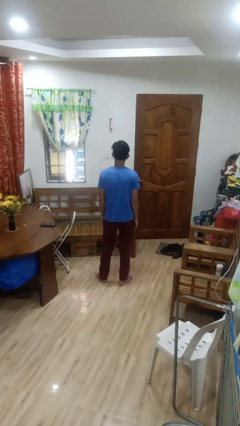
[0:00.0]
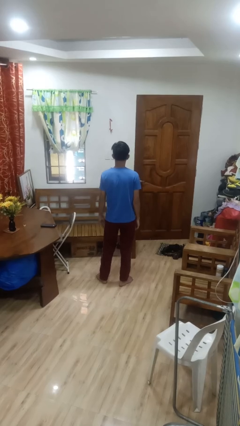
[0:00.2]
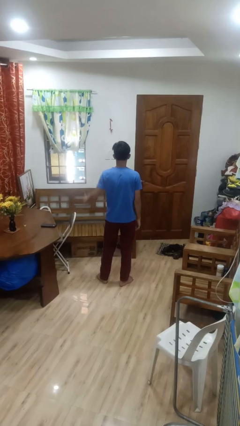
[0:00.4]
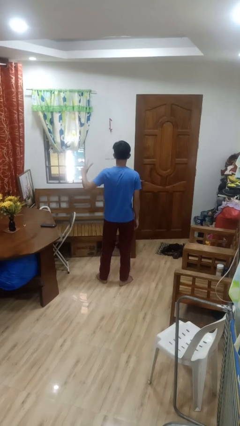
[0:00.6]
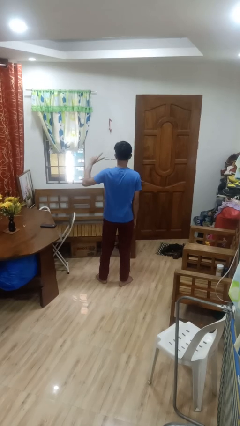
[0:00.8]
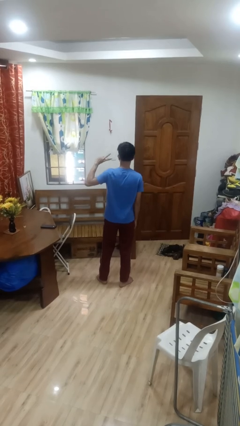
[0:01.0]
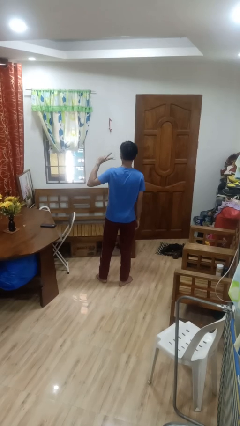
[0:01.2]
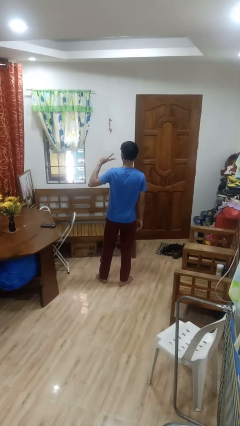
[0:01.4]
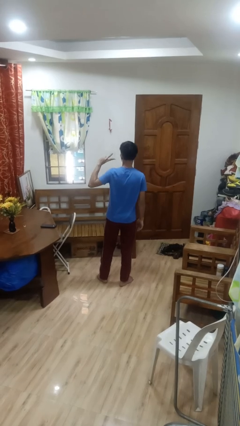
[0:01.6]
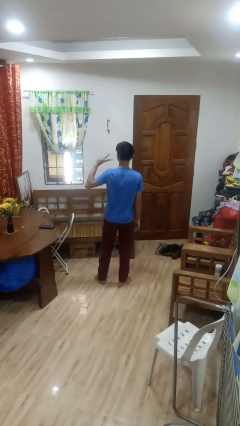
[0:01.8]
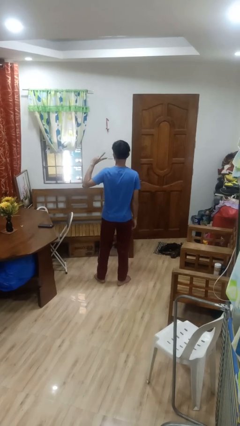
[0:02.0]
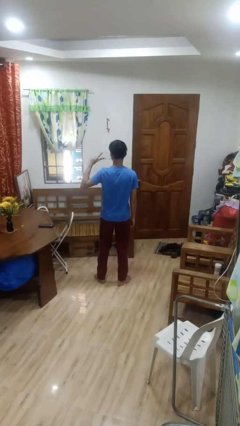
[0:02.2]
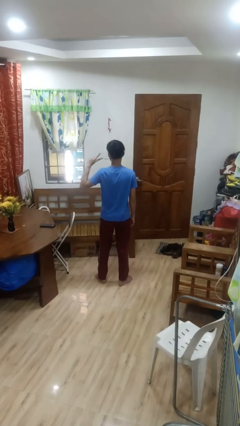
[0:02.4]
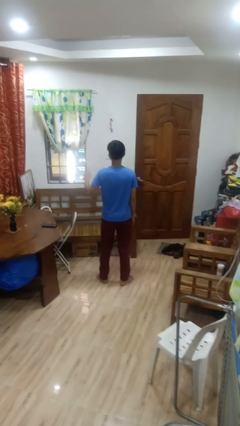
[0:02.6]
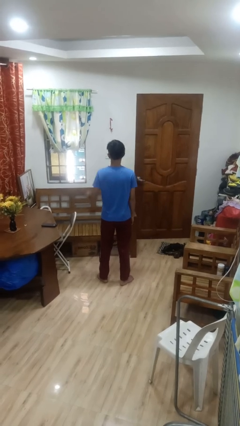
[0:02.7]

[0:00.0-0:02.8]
person gestures peace

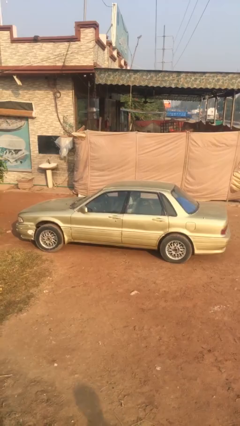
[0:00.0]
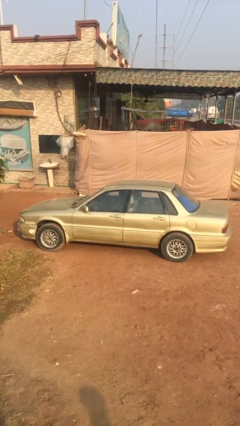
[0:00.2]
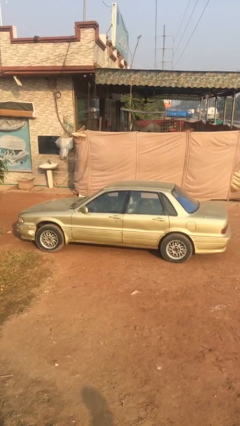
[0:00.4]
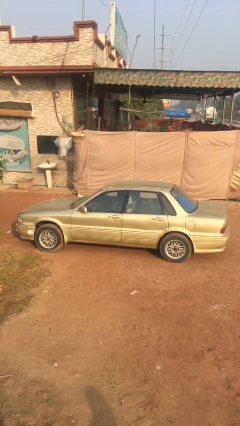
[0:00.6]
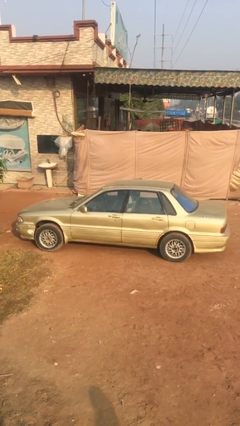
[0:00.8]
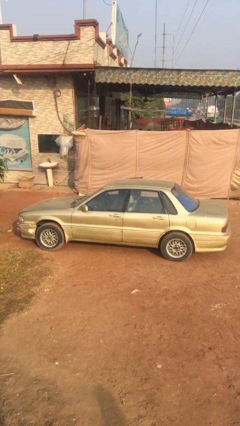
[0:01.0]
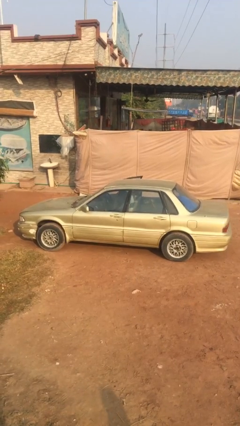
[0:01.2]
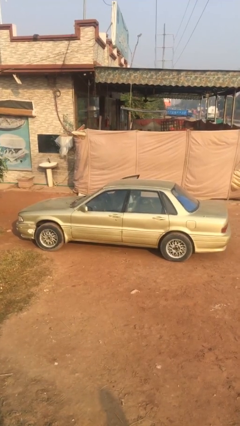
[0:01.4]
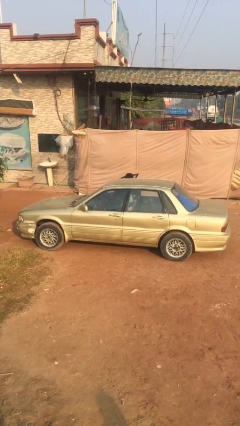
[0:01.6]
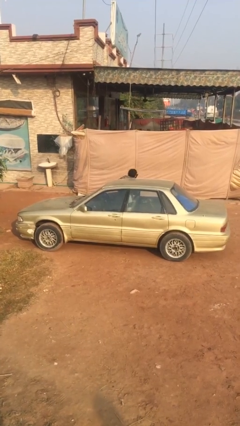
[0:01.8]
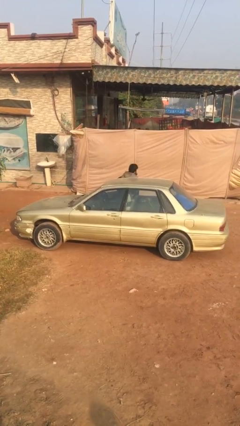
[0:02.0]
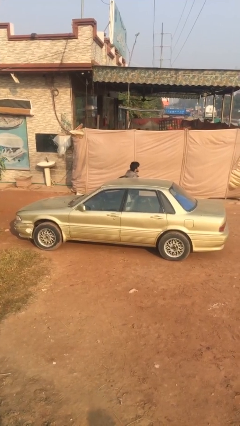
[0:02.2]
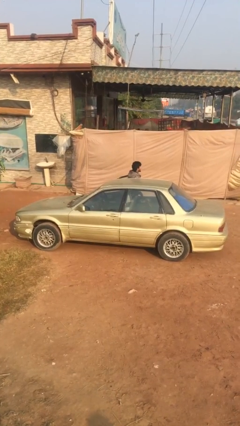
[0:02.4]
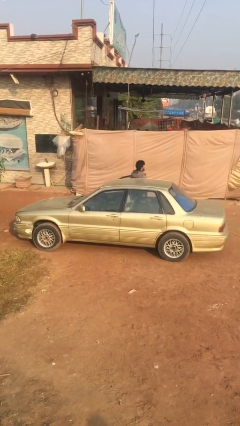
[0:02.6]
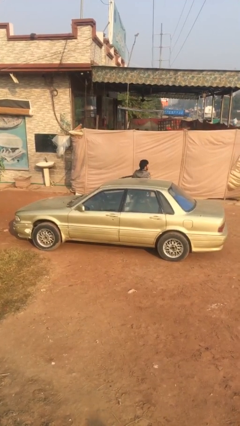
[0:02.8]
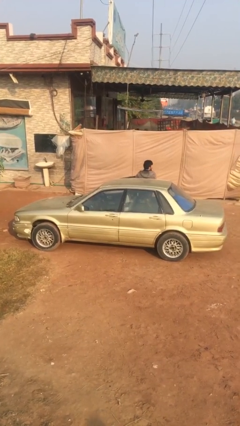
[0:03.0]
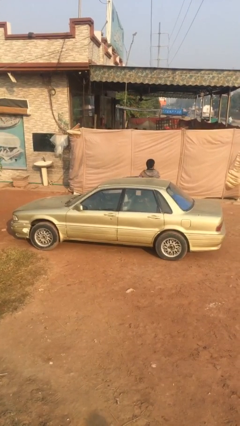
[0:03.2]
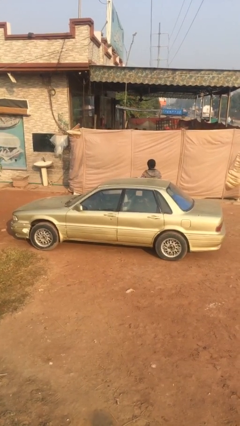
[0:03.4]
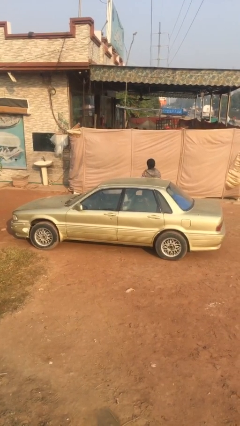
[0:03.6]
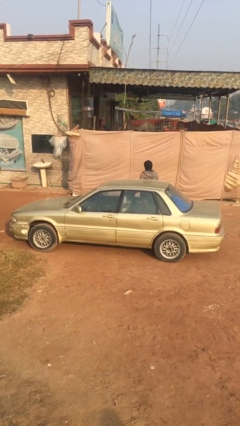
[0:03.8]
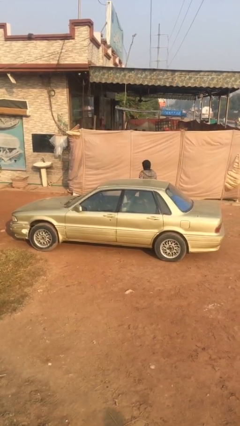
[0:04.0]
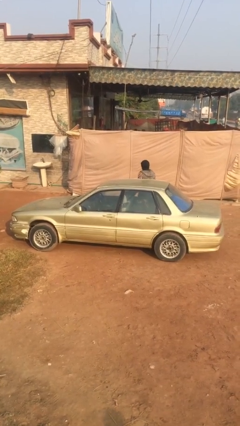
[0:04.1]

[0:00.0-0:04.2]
car drops off person

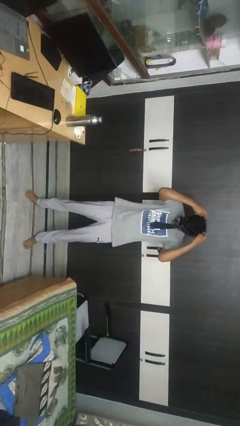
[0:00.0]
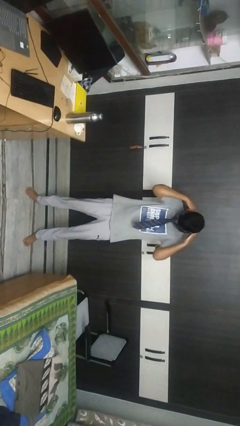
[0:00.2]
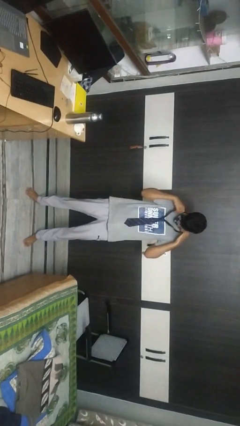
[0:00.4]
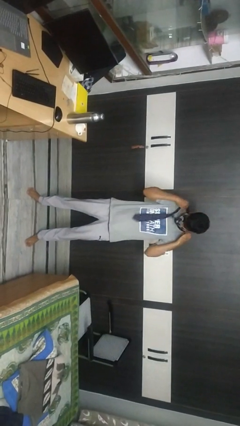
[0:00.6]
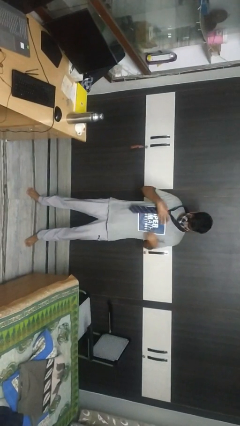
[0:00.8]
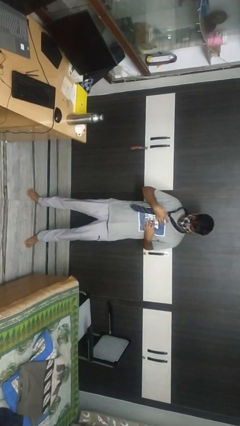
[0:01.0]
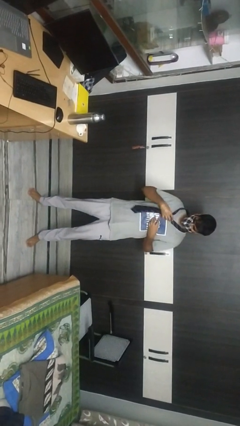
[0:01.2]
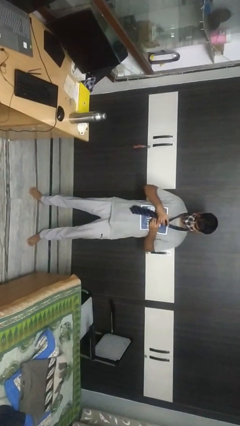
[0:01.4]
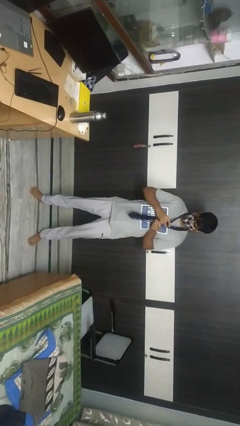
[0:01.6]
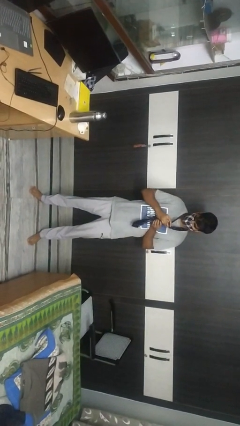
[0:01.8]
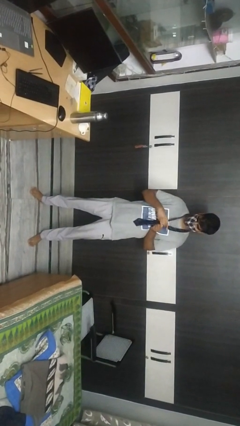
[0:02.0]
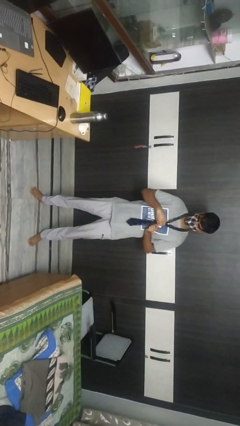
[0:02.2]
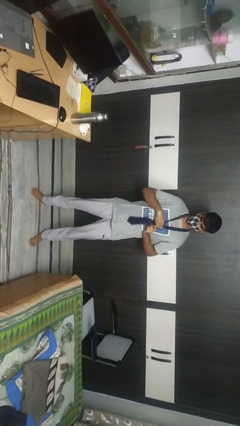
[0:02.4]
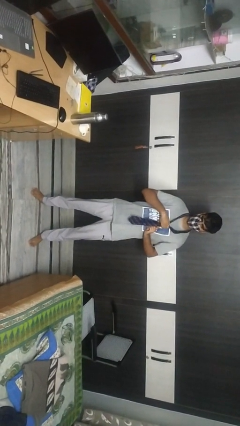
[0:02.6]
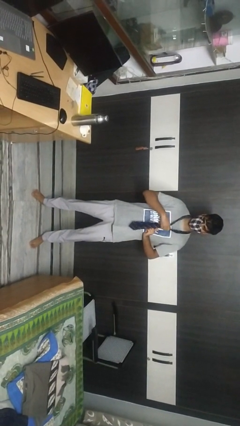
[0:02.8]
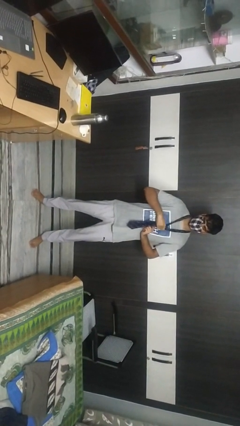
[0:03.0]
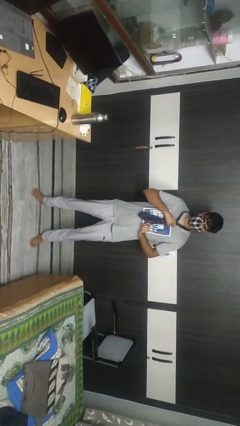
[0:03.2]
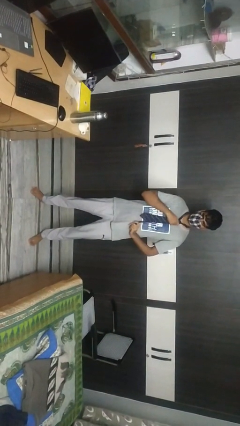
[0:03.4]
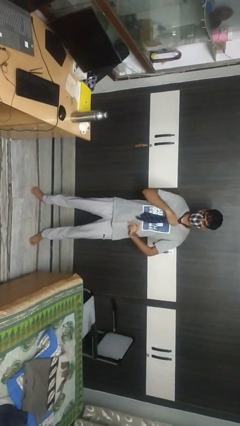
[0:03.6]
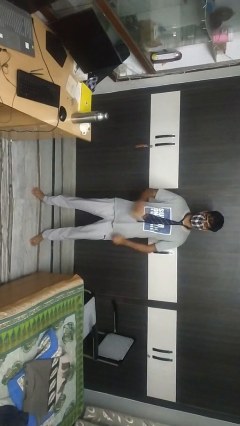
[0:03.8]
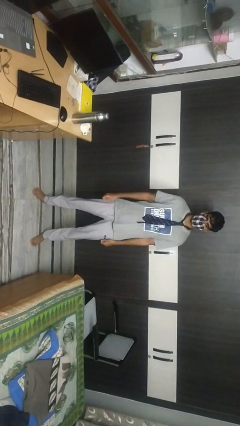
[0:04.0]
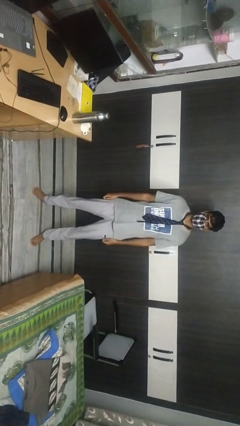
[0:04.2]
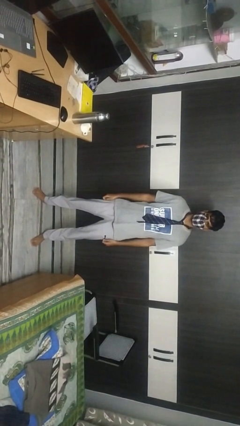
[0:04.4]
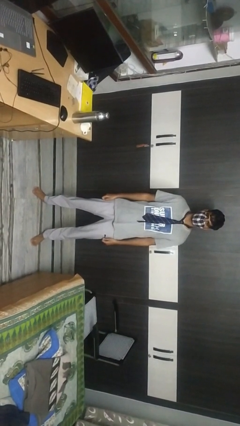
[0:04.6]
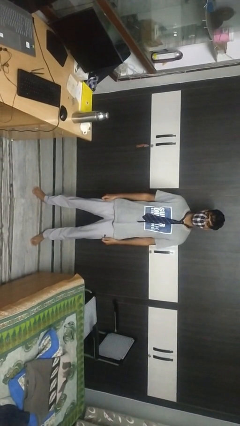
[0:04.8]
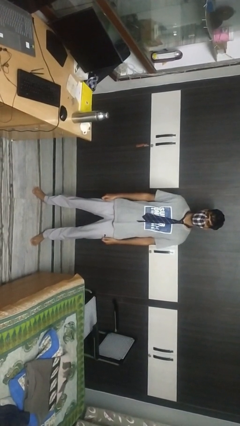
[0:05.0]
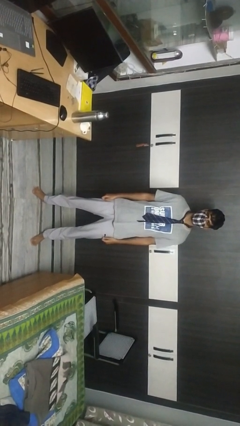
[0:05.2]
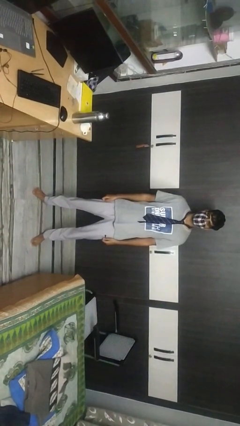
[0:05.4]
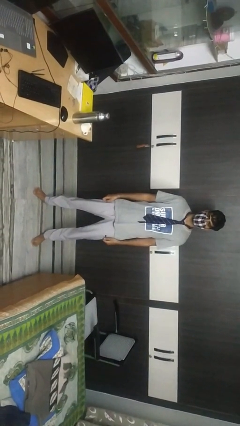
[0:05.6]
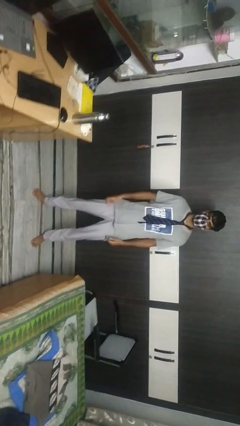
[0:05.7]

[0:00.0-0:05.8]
person puts on necktie

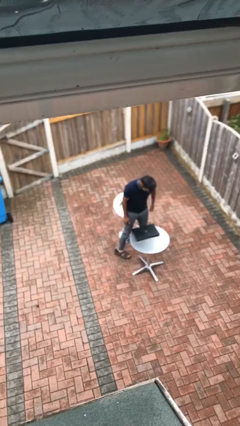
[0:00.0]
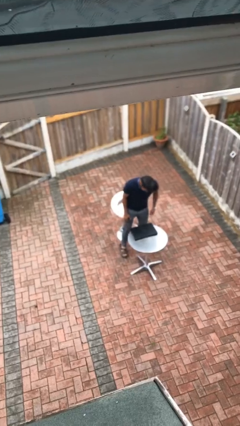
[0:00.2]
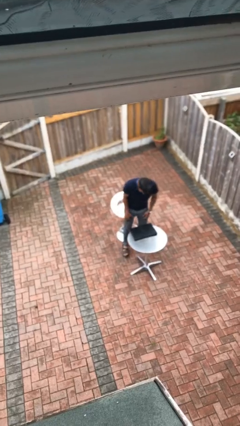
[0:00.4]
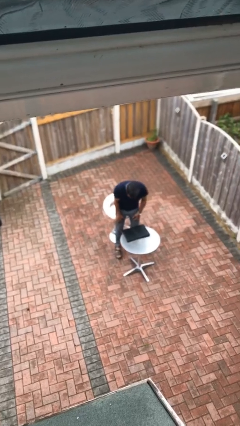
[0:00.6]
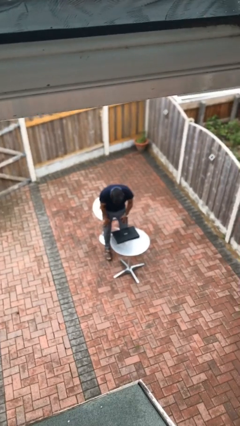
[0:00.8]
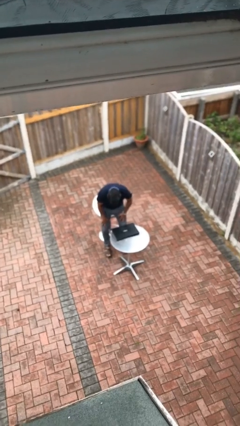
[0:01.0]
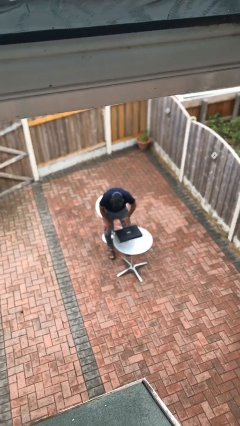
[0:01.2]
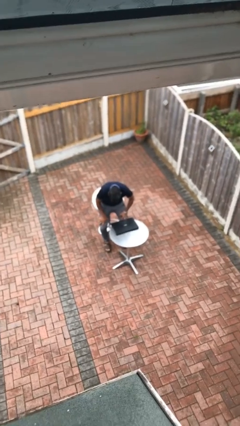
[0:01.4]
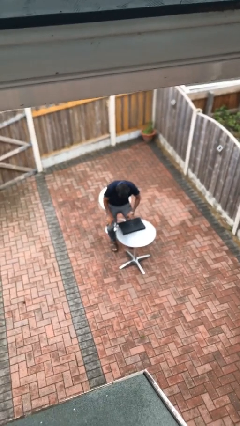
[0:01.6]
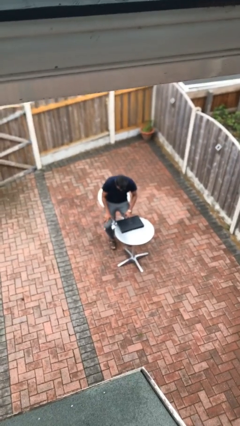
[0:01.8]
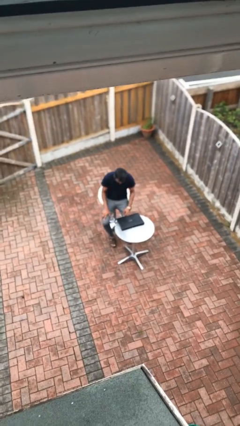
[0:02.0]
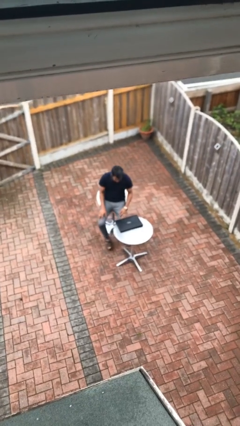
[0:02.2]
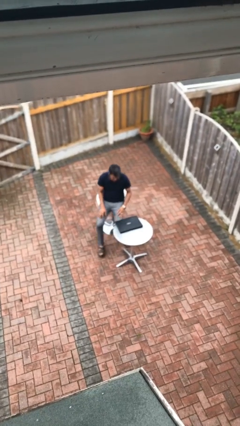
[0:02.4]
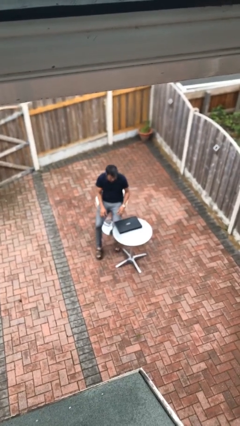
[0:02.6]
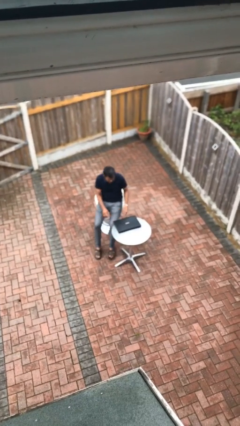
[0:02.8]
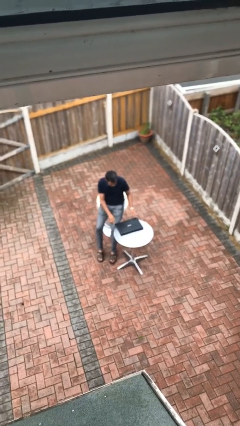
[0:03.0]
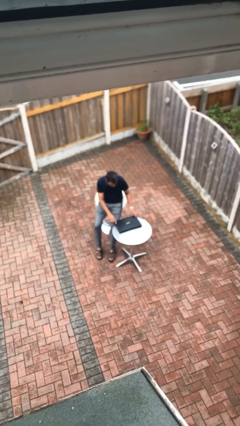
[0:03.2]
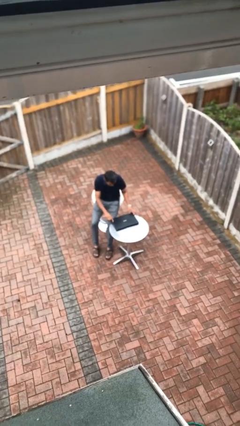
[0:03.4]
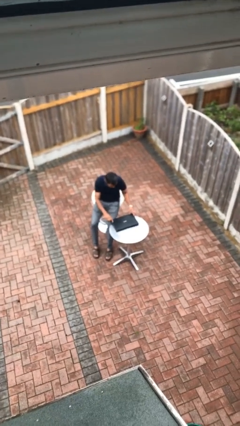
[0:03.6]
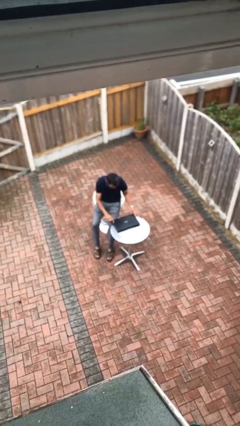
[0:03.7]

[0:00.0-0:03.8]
person sits down

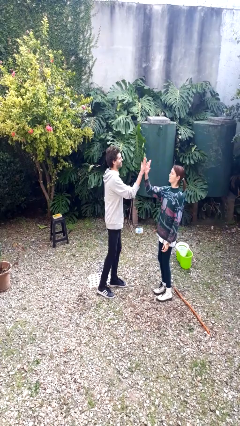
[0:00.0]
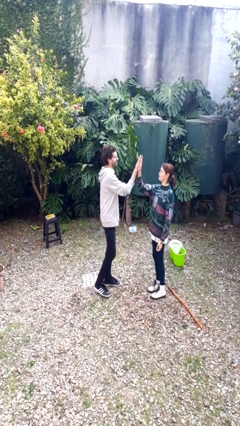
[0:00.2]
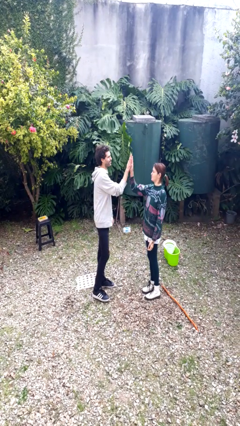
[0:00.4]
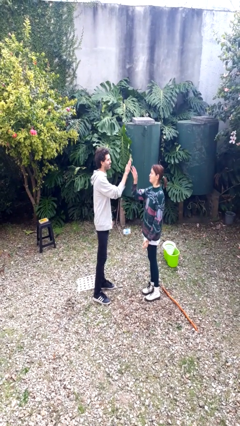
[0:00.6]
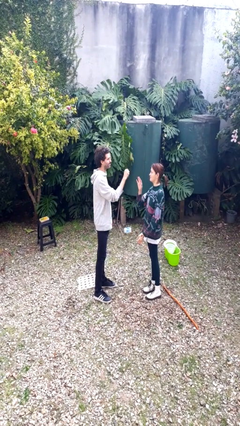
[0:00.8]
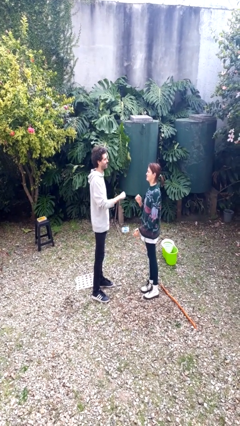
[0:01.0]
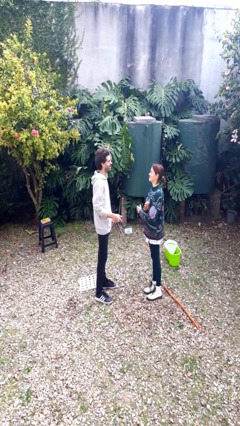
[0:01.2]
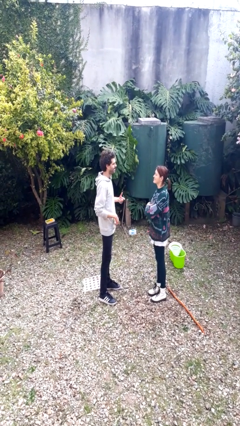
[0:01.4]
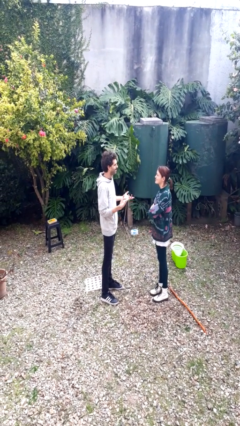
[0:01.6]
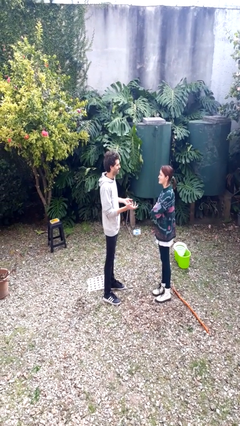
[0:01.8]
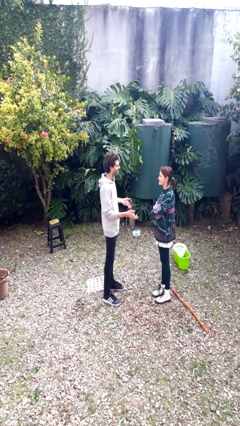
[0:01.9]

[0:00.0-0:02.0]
person highfives hand
